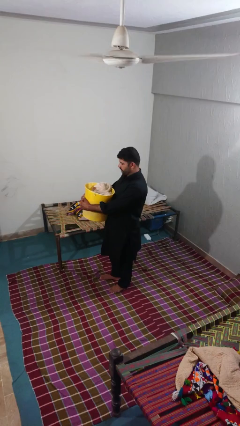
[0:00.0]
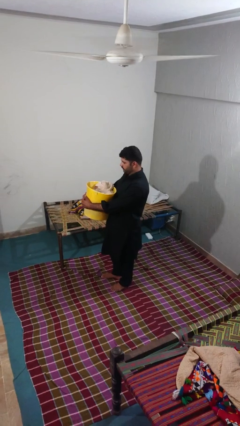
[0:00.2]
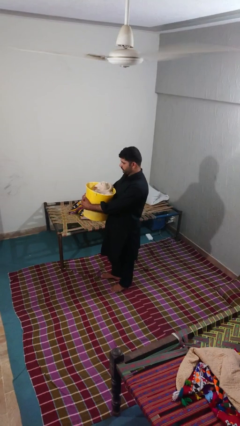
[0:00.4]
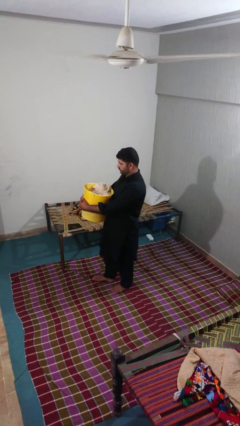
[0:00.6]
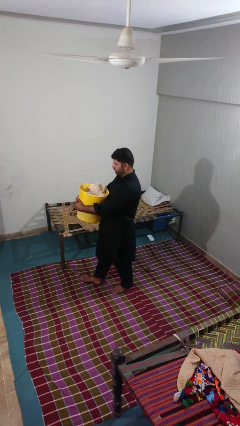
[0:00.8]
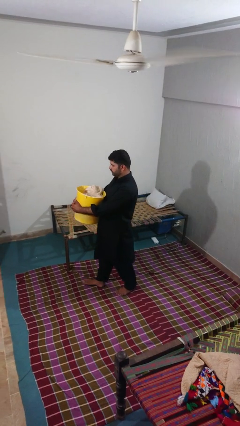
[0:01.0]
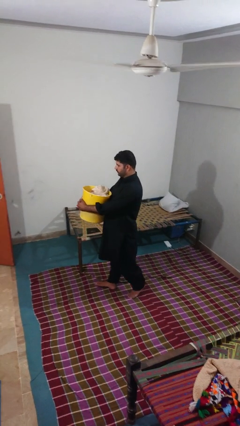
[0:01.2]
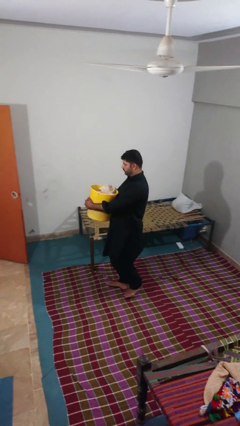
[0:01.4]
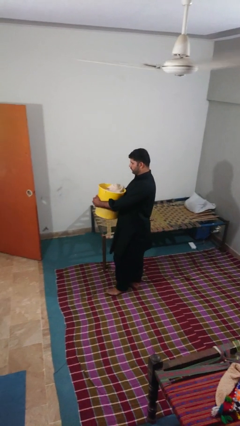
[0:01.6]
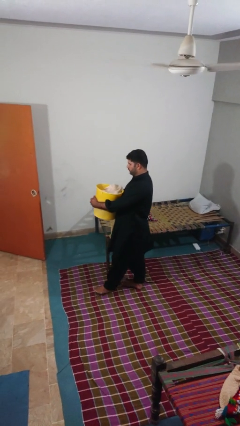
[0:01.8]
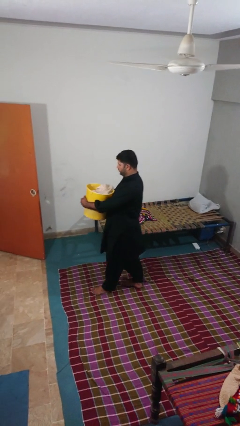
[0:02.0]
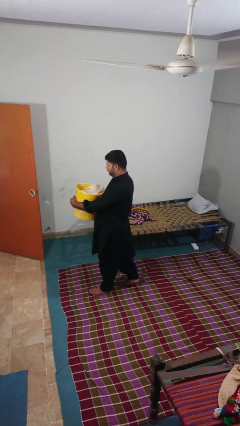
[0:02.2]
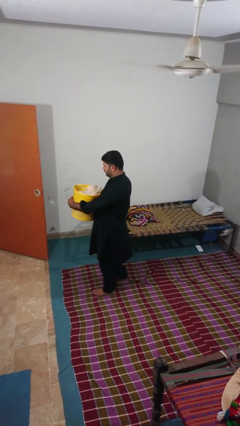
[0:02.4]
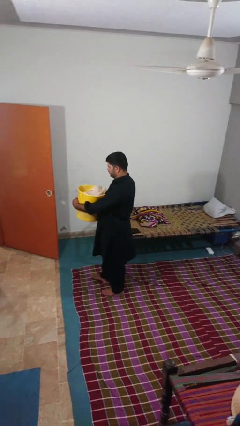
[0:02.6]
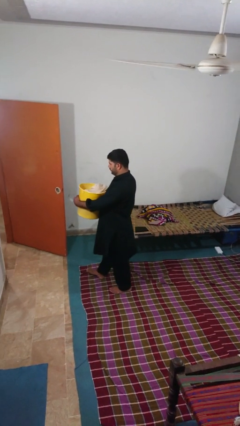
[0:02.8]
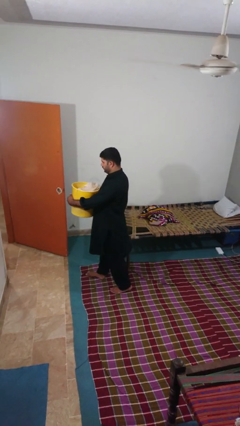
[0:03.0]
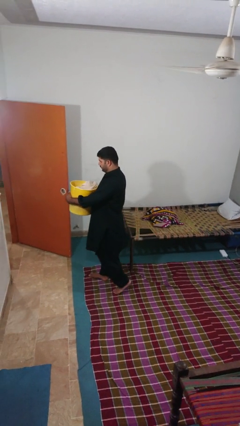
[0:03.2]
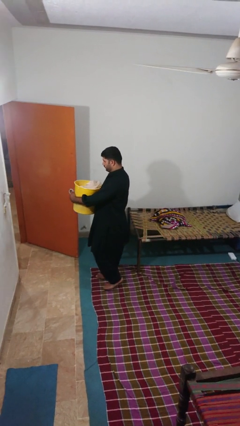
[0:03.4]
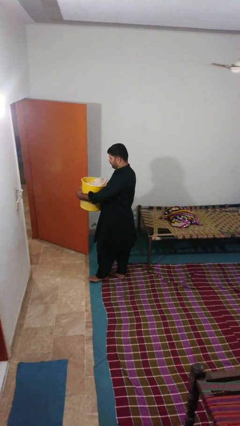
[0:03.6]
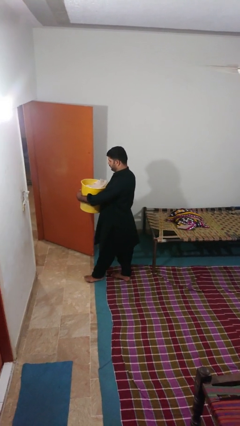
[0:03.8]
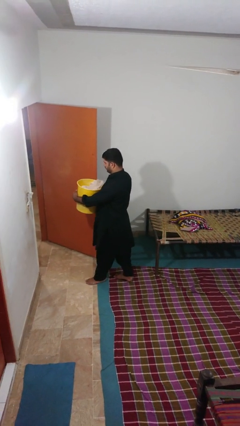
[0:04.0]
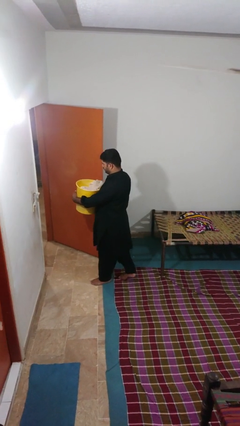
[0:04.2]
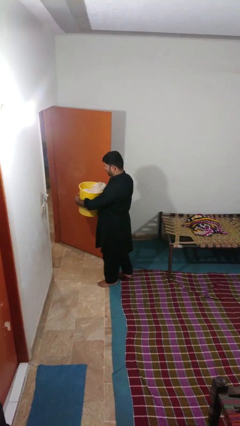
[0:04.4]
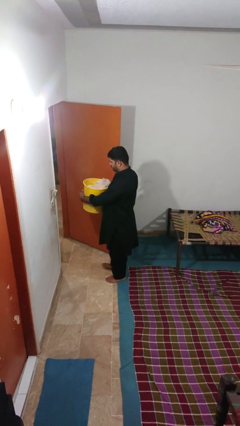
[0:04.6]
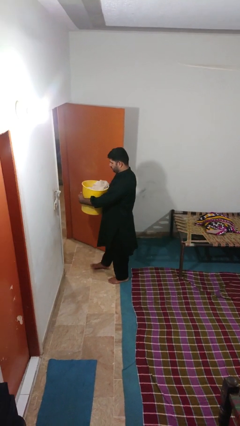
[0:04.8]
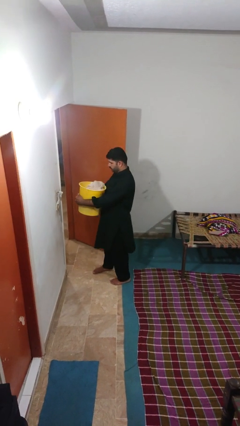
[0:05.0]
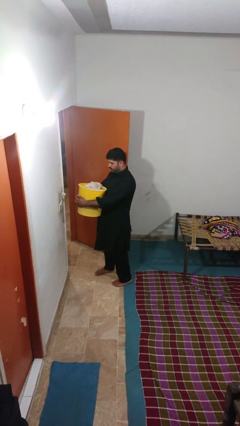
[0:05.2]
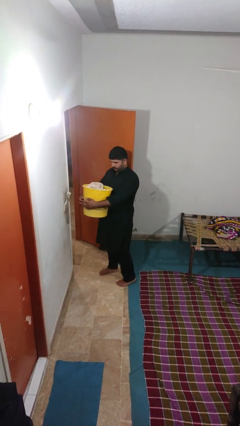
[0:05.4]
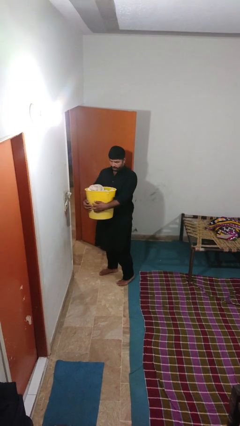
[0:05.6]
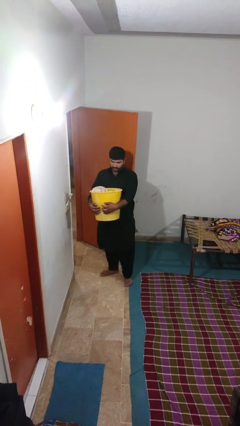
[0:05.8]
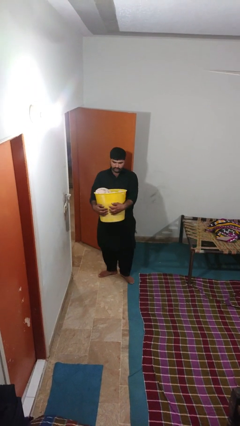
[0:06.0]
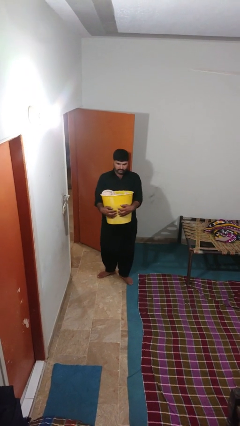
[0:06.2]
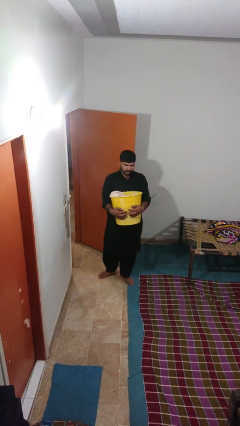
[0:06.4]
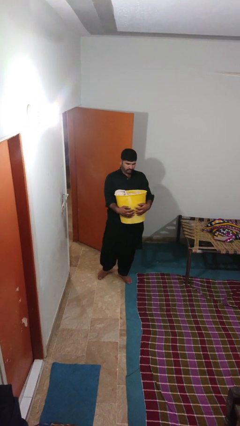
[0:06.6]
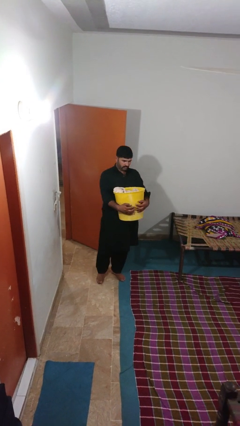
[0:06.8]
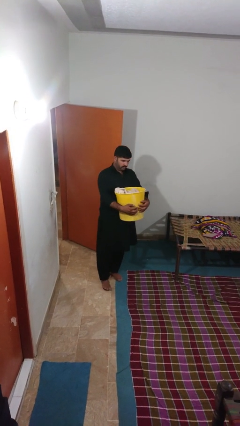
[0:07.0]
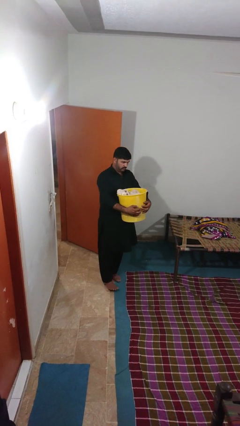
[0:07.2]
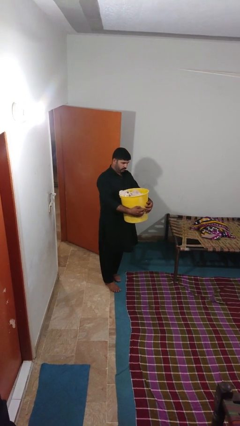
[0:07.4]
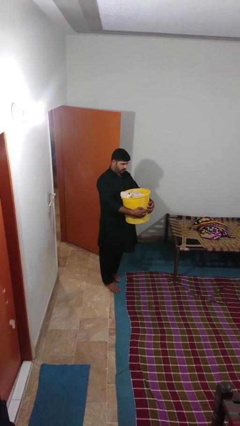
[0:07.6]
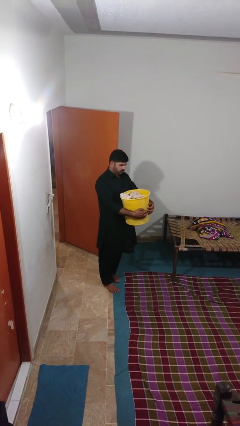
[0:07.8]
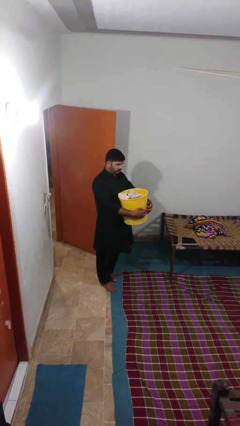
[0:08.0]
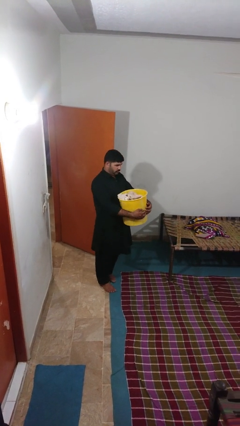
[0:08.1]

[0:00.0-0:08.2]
person carries laundry basket

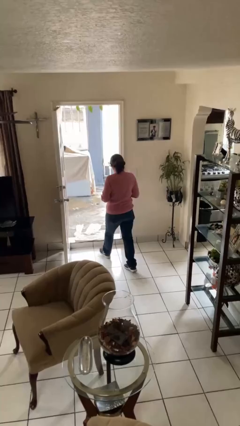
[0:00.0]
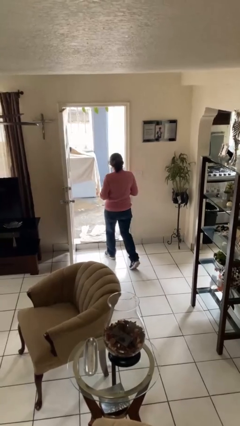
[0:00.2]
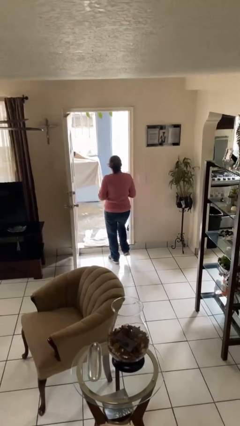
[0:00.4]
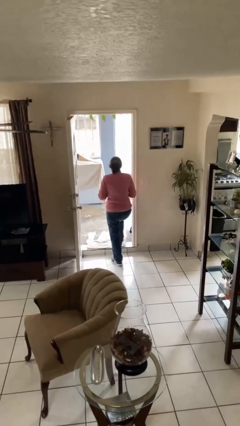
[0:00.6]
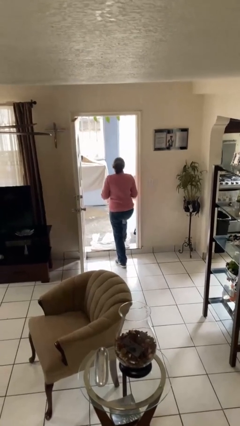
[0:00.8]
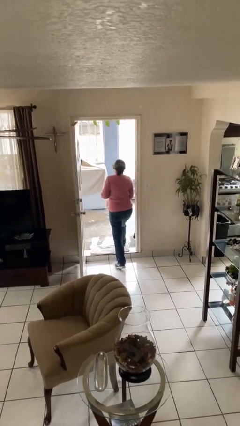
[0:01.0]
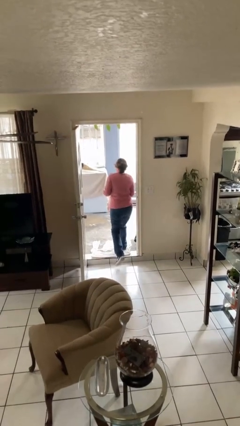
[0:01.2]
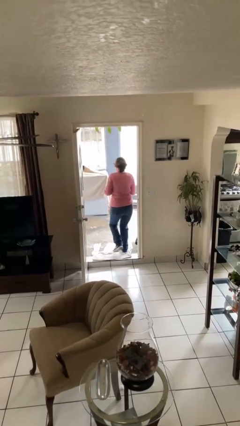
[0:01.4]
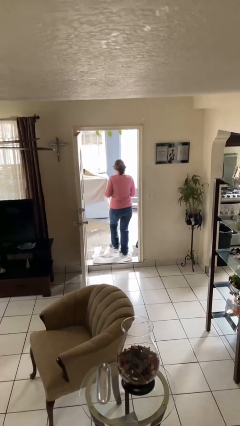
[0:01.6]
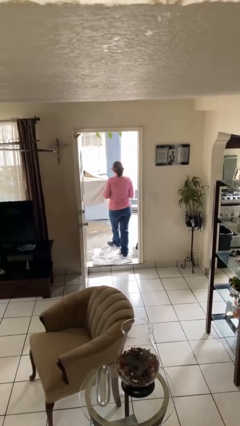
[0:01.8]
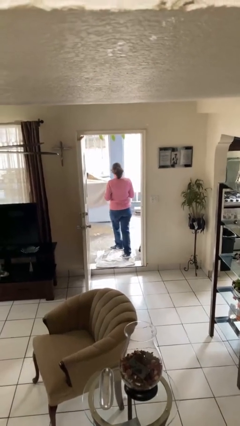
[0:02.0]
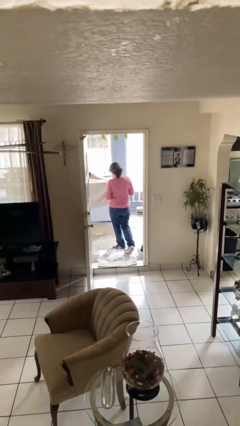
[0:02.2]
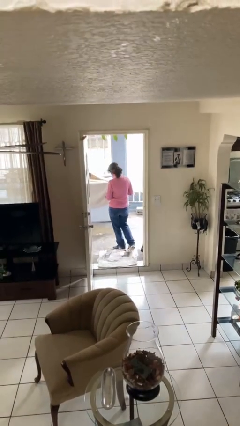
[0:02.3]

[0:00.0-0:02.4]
person exits scene through structure

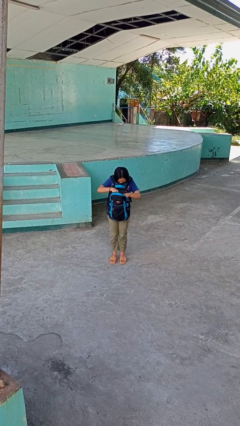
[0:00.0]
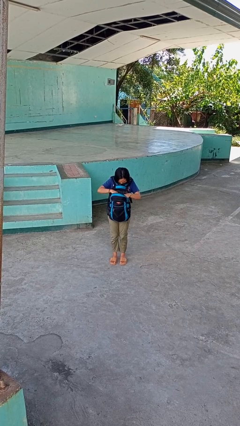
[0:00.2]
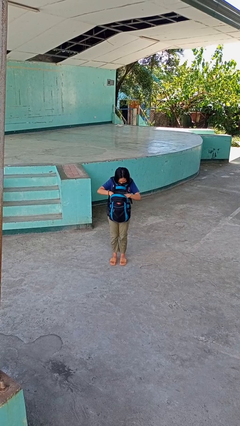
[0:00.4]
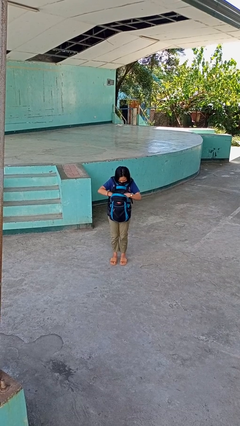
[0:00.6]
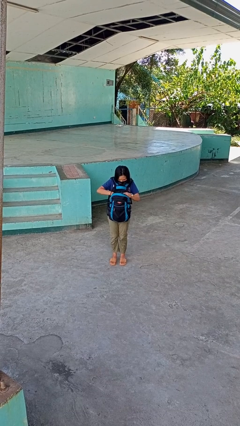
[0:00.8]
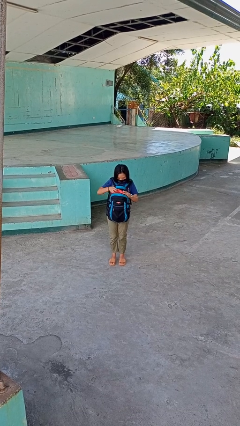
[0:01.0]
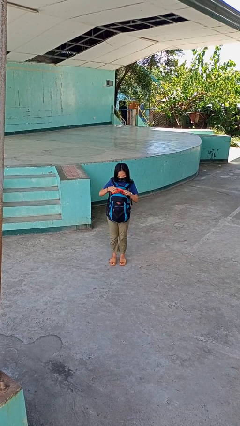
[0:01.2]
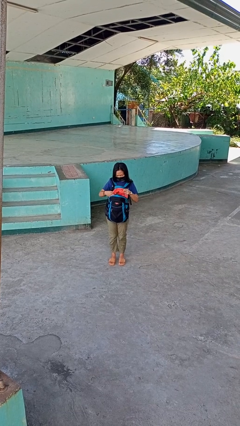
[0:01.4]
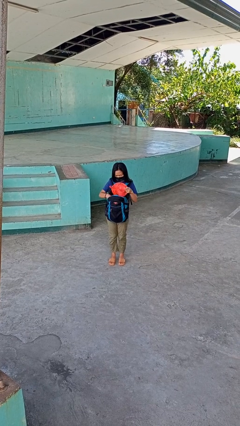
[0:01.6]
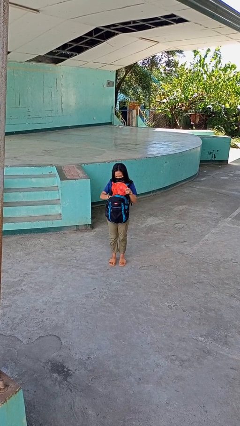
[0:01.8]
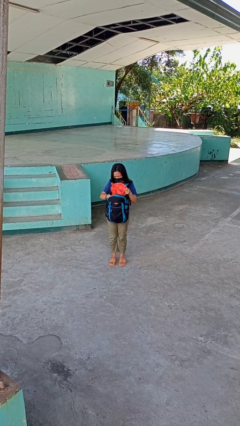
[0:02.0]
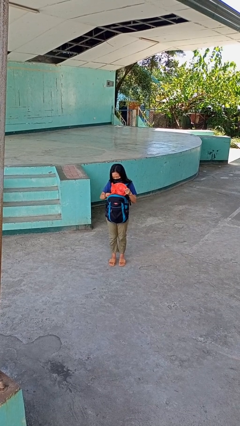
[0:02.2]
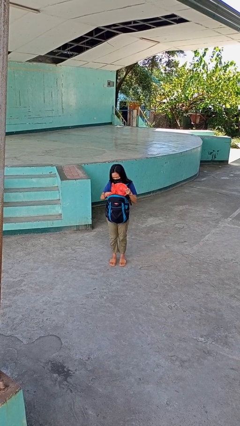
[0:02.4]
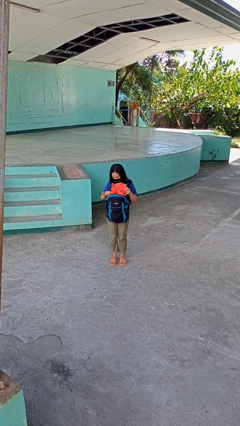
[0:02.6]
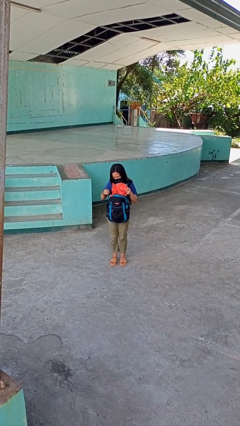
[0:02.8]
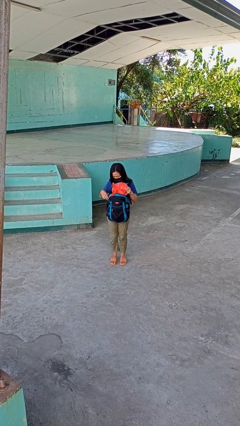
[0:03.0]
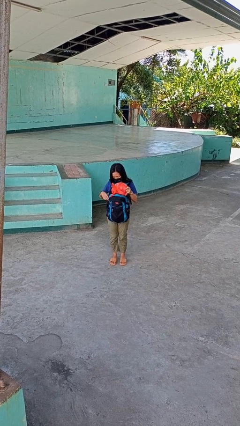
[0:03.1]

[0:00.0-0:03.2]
person takes object from backpack

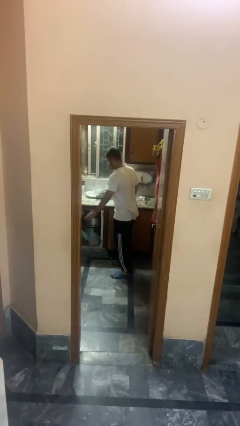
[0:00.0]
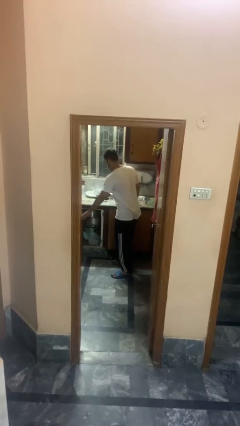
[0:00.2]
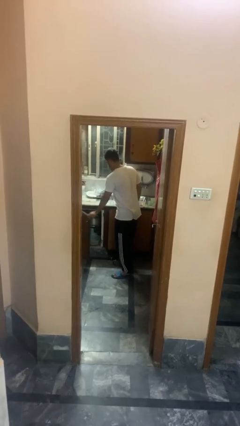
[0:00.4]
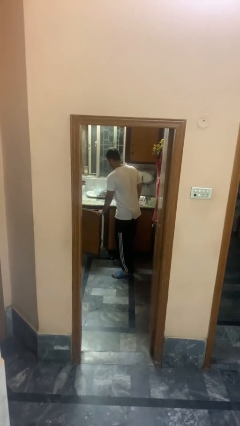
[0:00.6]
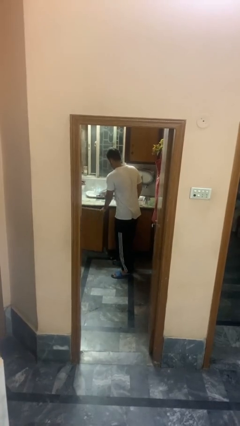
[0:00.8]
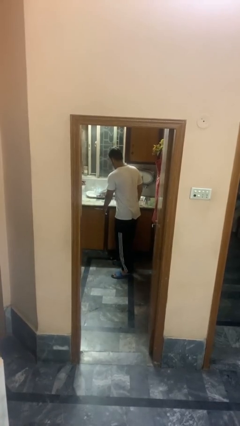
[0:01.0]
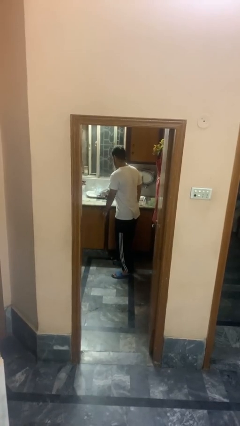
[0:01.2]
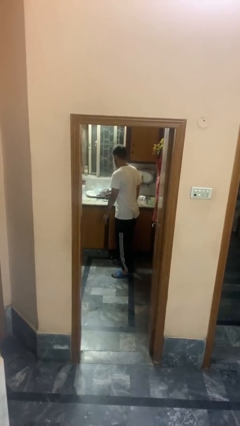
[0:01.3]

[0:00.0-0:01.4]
person closes cabinet

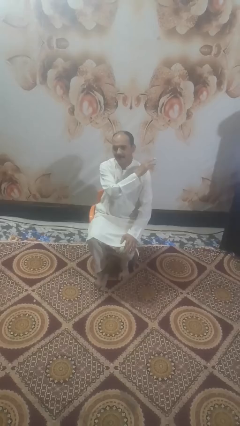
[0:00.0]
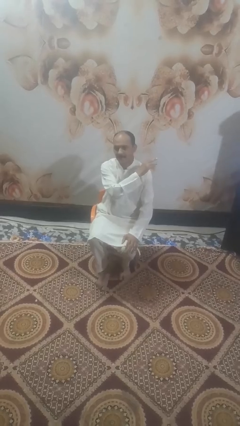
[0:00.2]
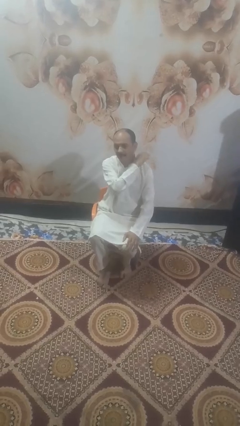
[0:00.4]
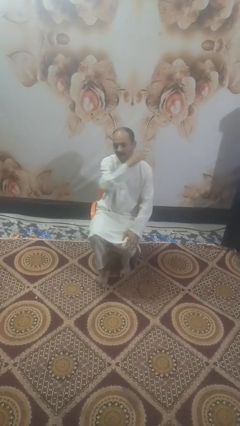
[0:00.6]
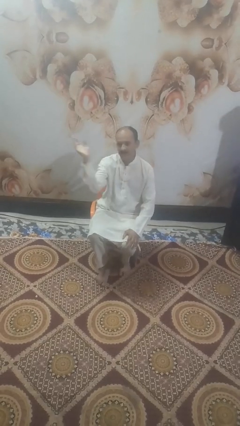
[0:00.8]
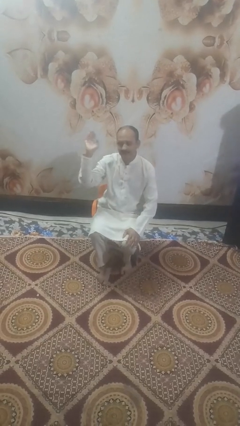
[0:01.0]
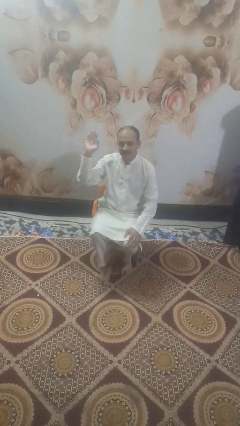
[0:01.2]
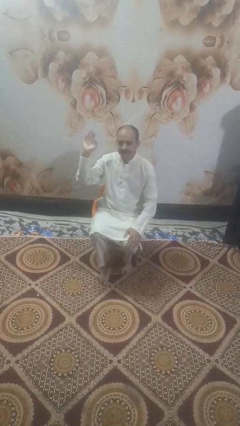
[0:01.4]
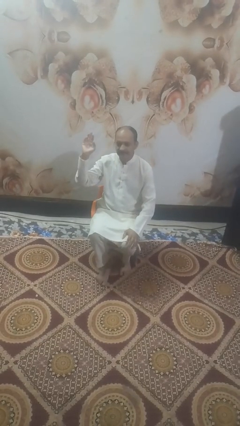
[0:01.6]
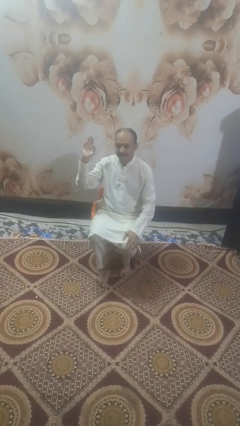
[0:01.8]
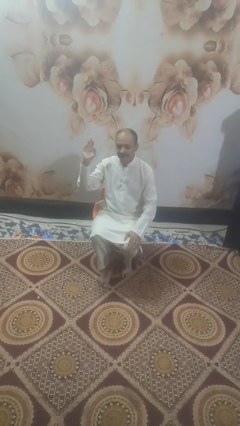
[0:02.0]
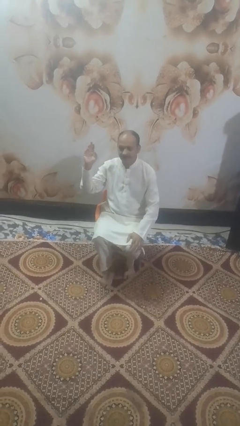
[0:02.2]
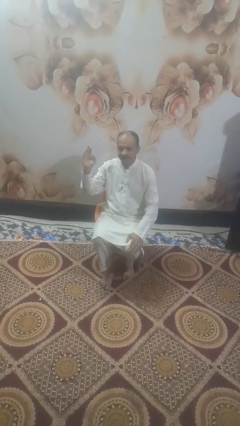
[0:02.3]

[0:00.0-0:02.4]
person gestures swipe right
